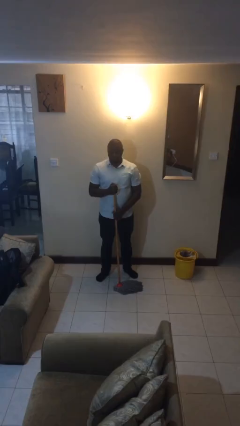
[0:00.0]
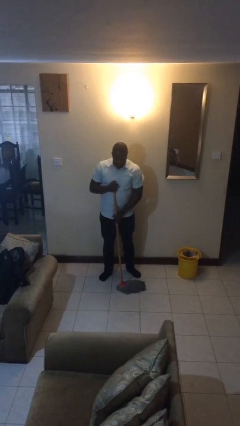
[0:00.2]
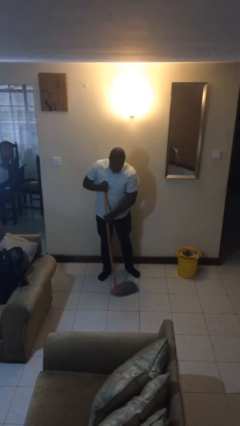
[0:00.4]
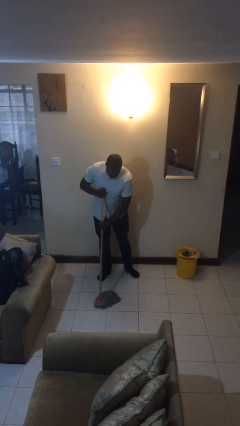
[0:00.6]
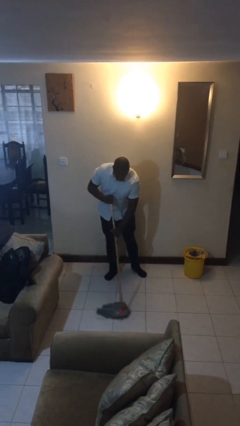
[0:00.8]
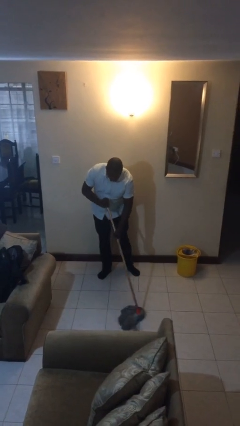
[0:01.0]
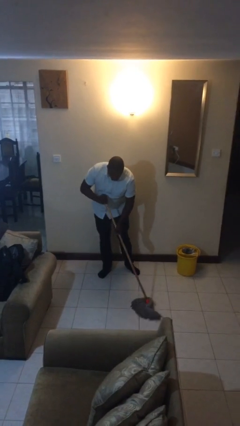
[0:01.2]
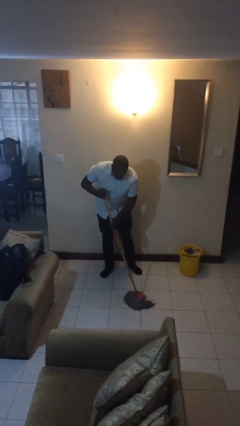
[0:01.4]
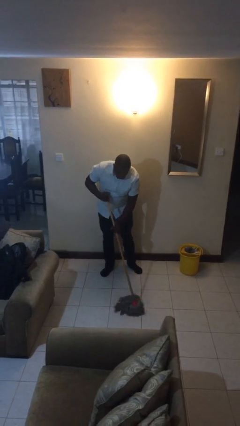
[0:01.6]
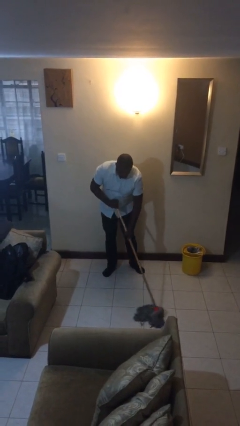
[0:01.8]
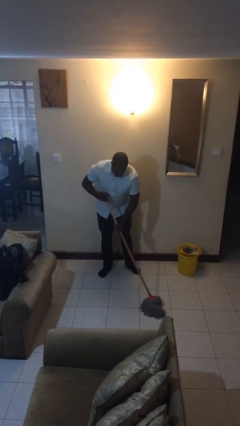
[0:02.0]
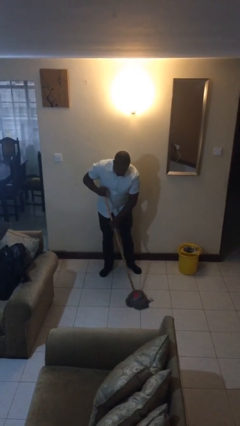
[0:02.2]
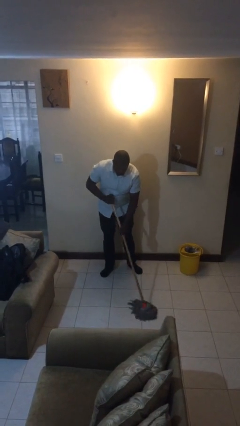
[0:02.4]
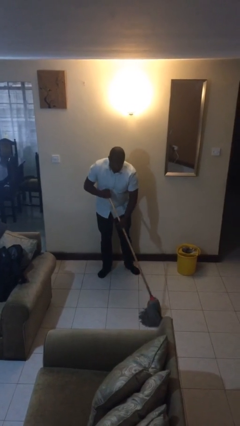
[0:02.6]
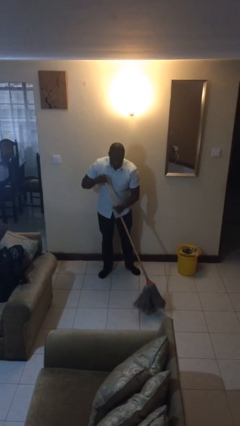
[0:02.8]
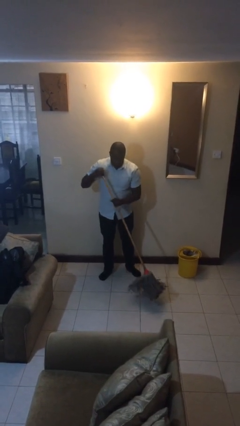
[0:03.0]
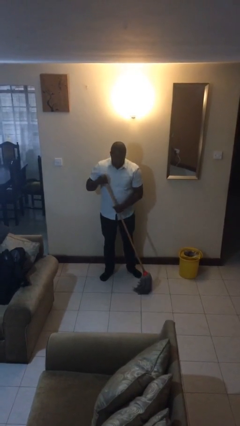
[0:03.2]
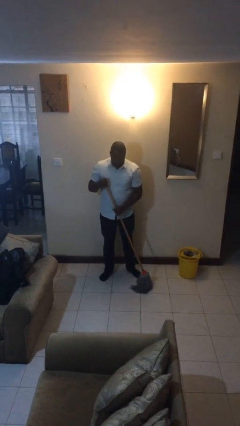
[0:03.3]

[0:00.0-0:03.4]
person mops

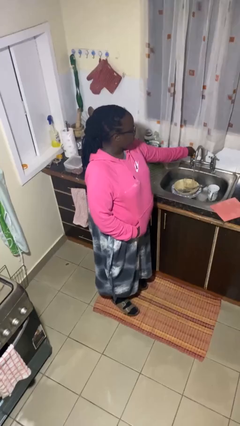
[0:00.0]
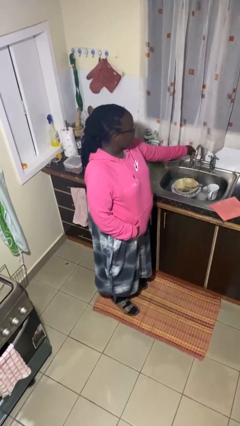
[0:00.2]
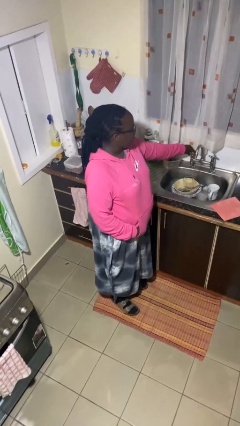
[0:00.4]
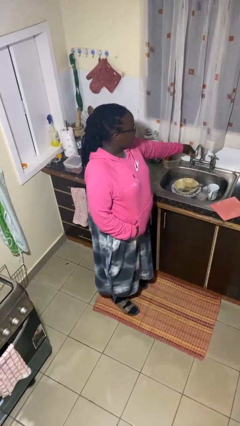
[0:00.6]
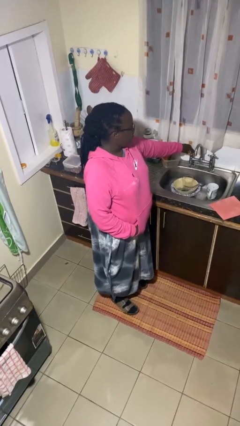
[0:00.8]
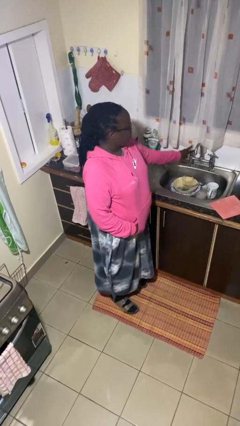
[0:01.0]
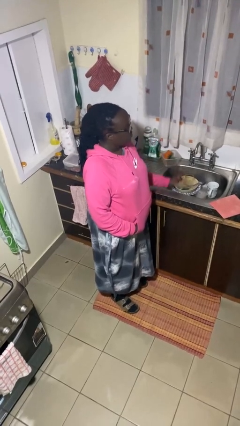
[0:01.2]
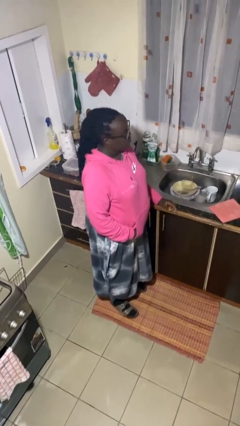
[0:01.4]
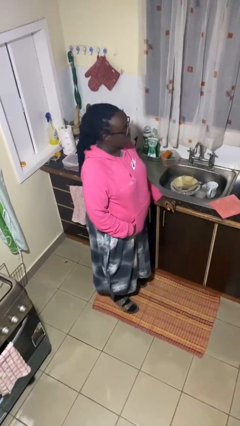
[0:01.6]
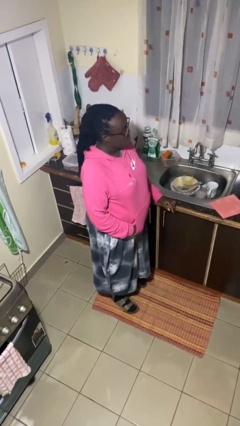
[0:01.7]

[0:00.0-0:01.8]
person turns off faucet

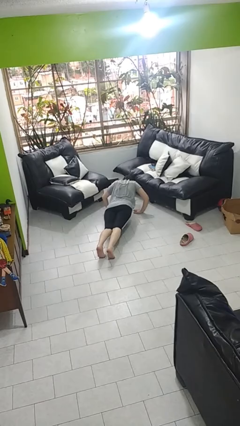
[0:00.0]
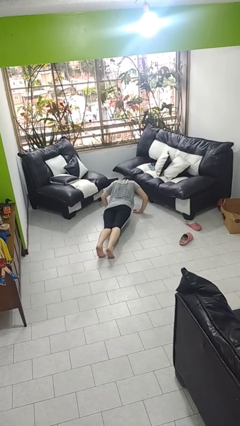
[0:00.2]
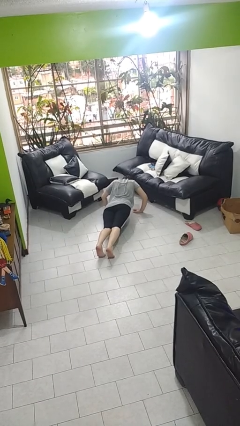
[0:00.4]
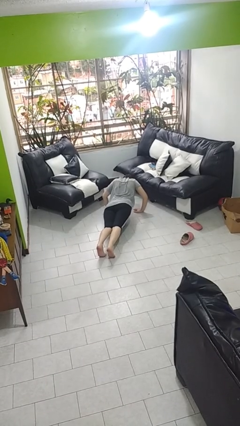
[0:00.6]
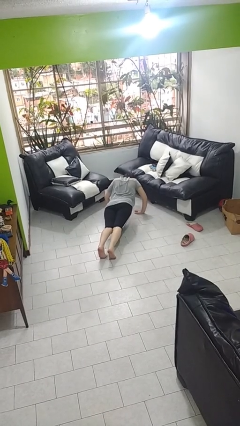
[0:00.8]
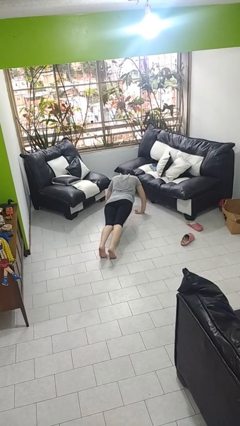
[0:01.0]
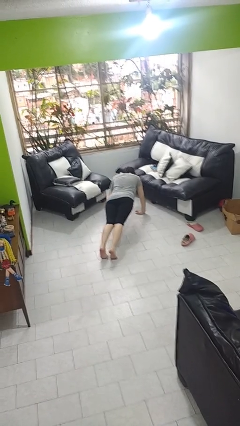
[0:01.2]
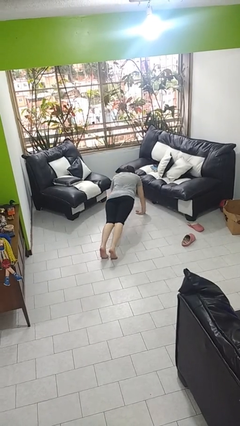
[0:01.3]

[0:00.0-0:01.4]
person exercises with pushup

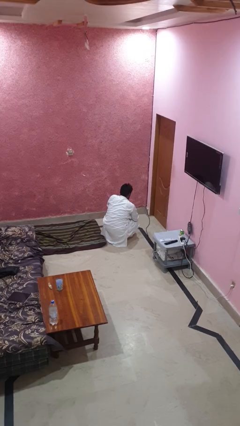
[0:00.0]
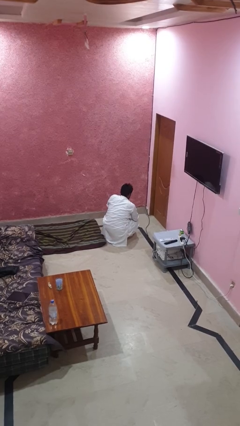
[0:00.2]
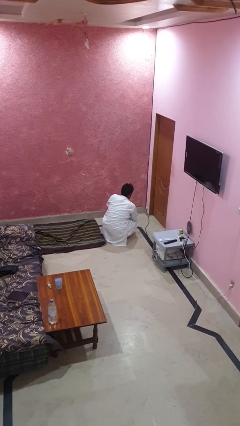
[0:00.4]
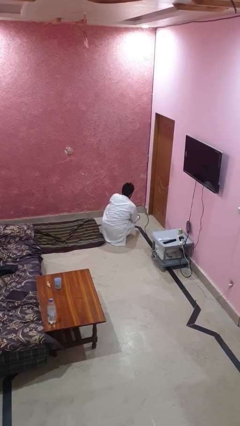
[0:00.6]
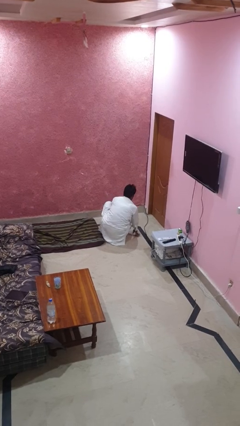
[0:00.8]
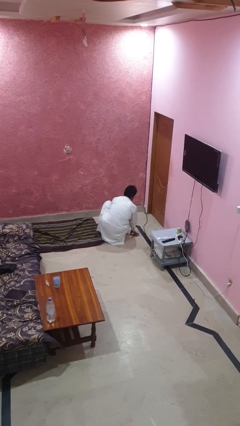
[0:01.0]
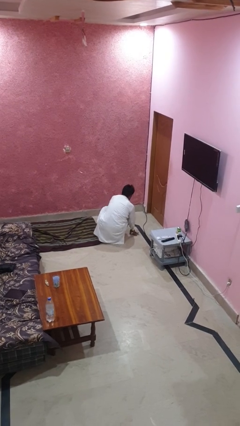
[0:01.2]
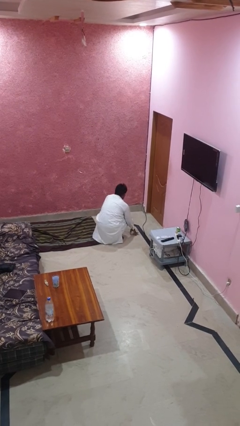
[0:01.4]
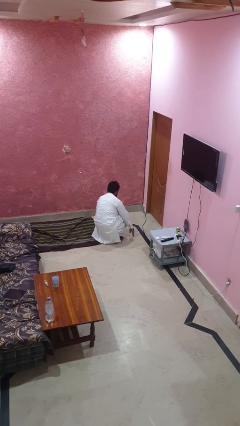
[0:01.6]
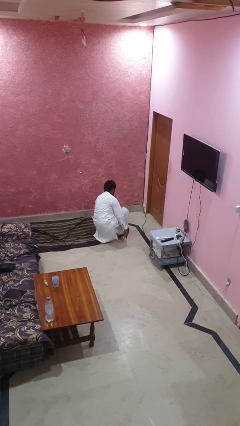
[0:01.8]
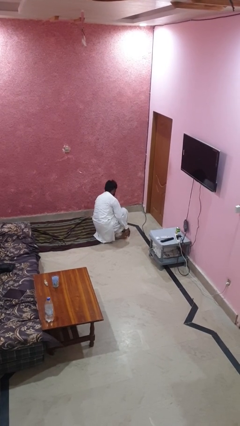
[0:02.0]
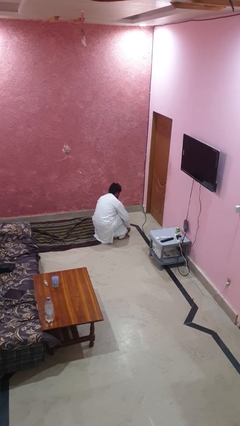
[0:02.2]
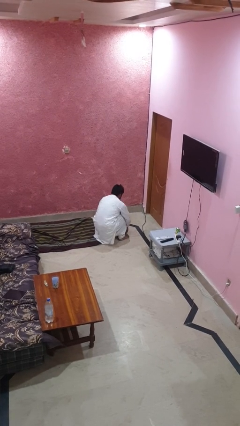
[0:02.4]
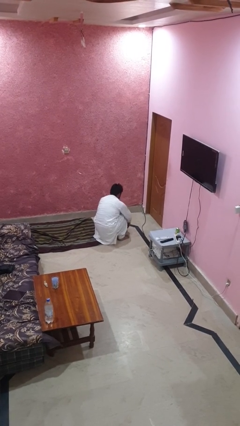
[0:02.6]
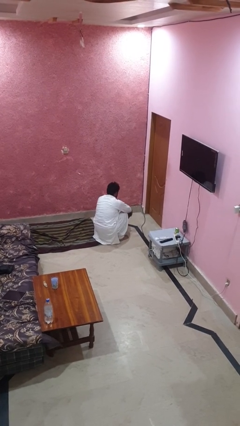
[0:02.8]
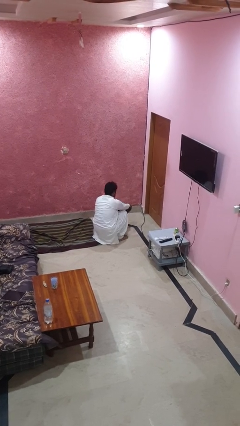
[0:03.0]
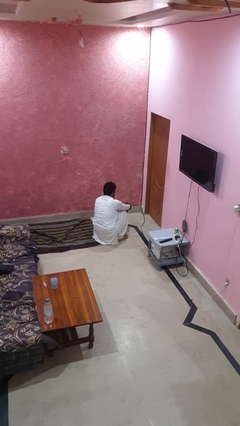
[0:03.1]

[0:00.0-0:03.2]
person takes off shoes

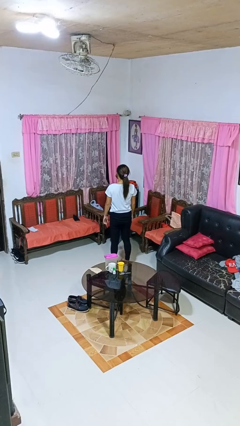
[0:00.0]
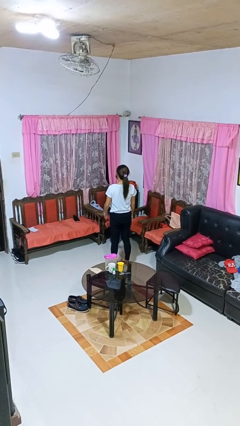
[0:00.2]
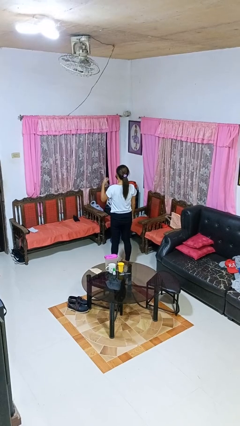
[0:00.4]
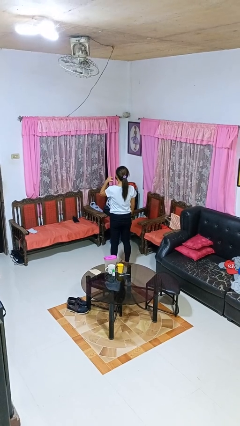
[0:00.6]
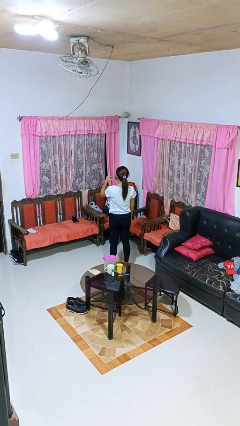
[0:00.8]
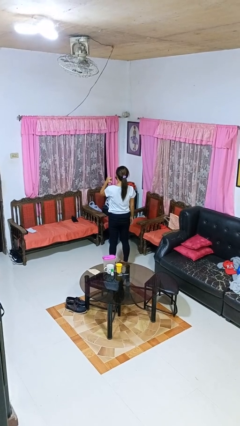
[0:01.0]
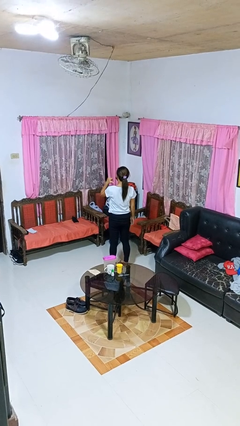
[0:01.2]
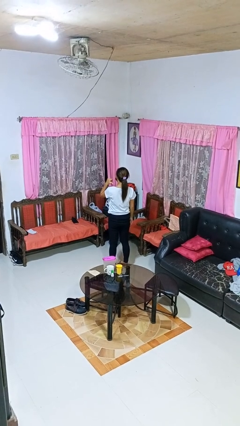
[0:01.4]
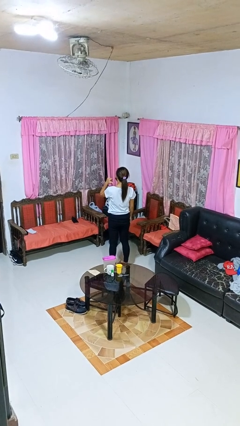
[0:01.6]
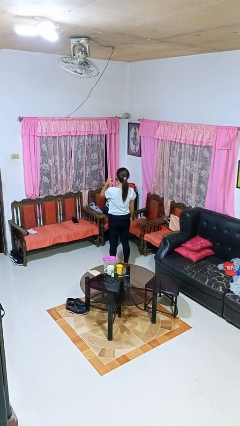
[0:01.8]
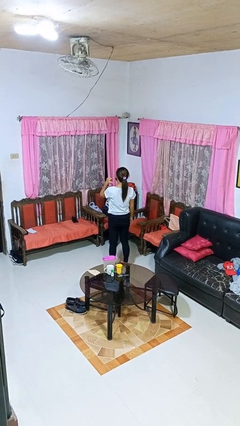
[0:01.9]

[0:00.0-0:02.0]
person gestures behind me

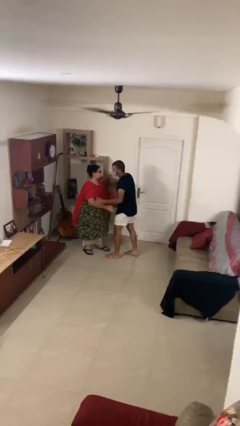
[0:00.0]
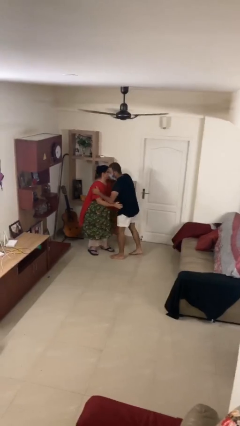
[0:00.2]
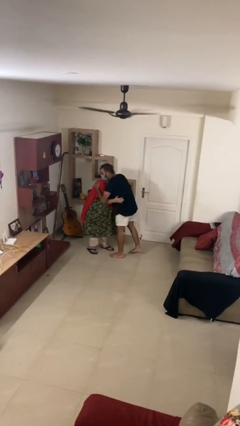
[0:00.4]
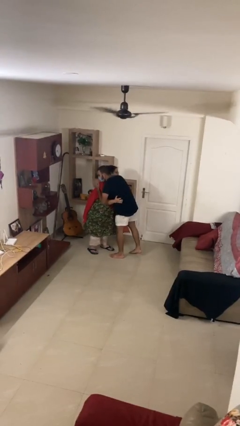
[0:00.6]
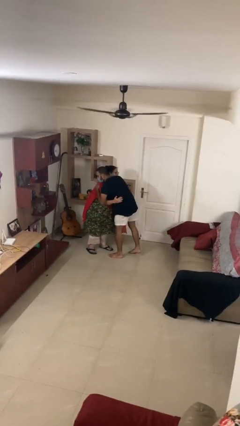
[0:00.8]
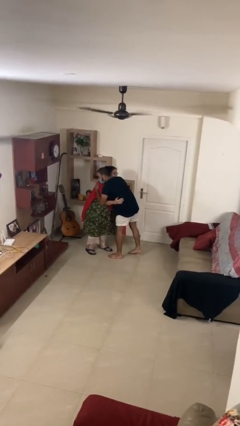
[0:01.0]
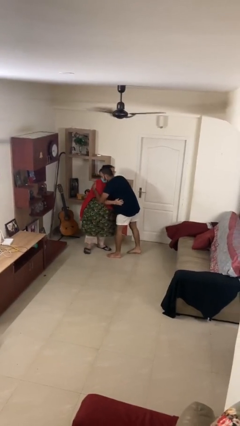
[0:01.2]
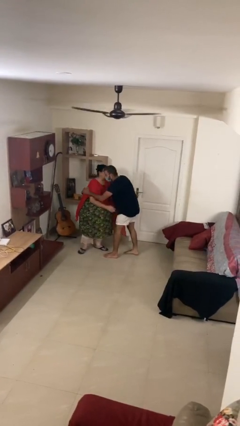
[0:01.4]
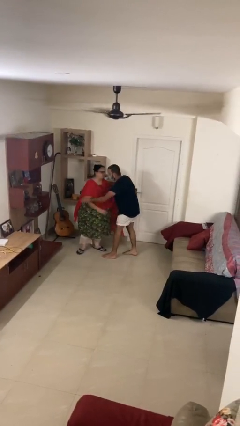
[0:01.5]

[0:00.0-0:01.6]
person embraces person

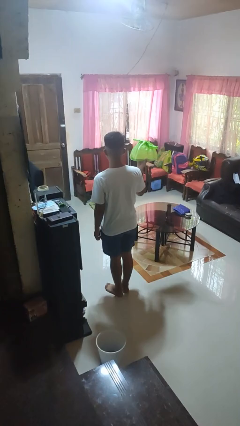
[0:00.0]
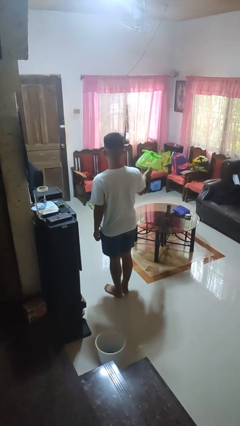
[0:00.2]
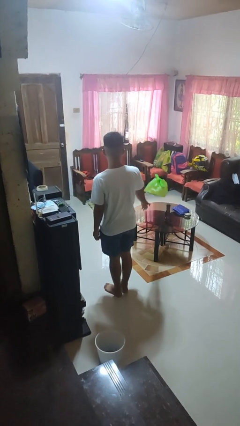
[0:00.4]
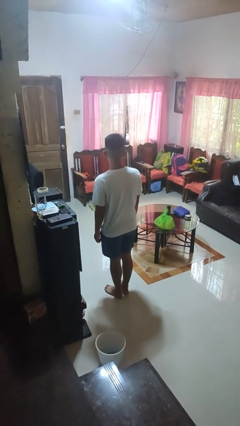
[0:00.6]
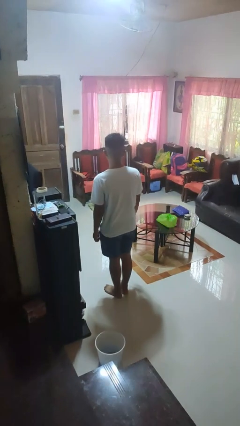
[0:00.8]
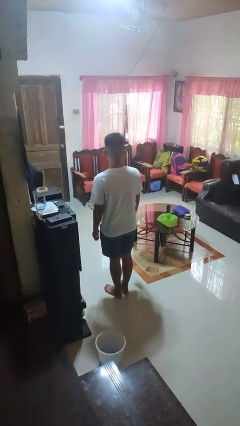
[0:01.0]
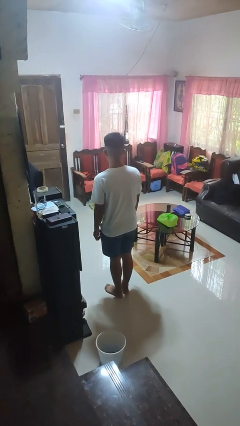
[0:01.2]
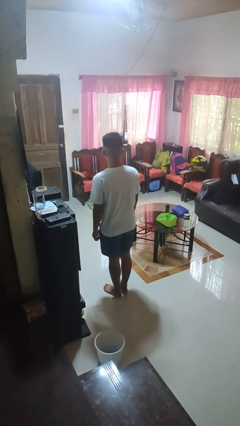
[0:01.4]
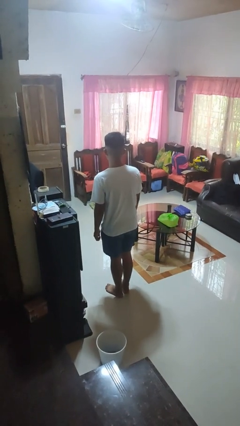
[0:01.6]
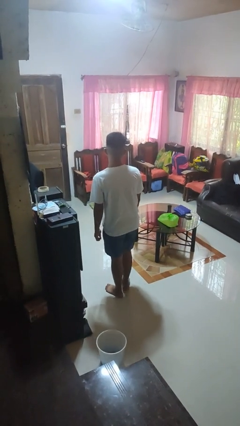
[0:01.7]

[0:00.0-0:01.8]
person throws object on table

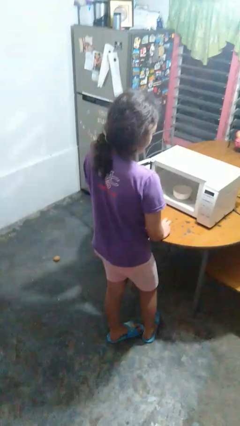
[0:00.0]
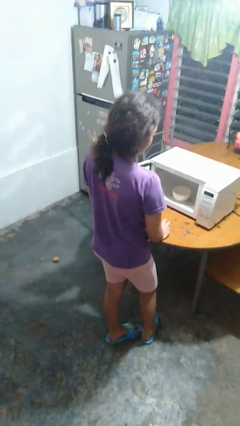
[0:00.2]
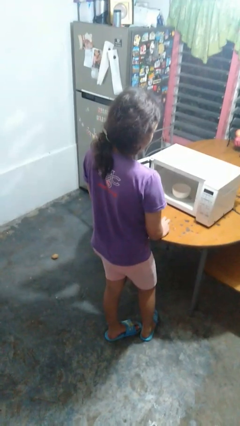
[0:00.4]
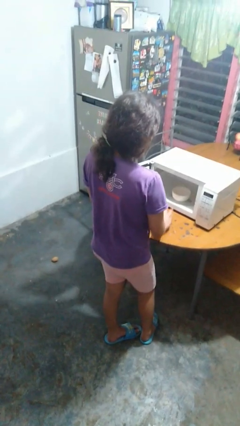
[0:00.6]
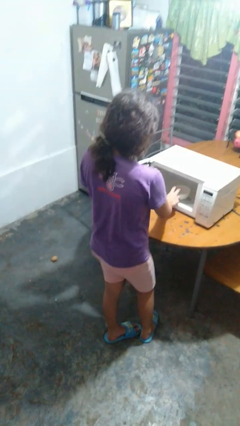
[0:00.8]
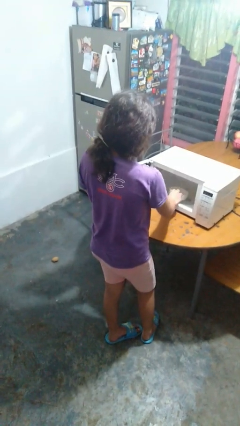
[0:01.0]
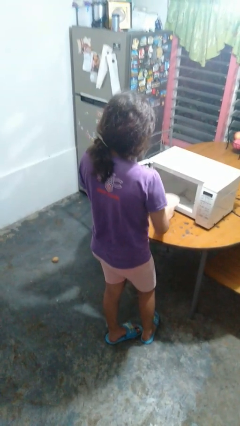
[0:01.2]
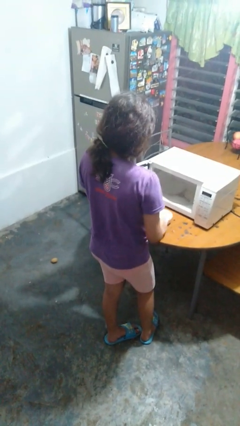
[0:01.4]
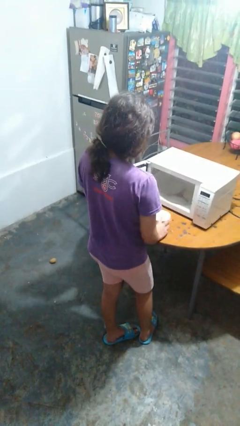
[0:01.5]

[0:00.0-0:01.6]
person takes object from microwave
